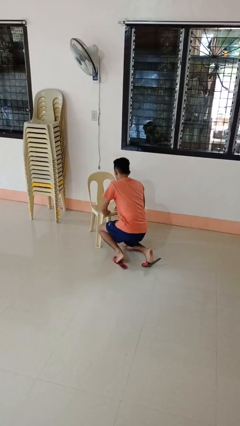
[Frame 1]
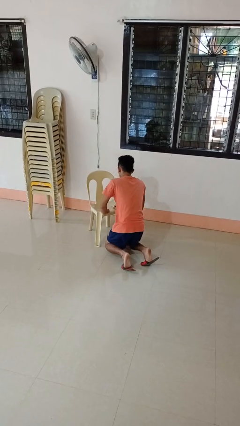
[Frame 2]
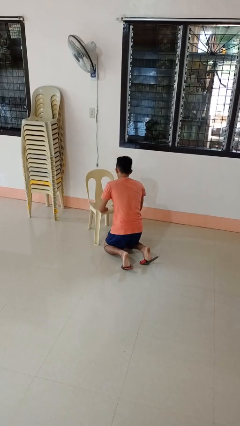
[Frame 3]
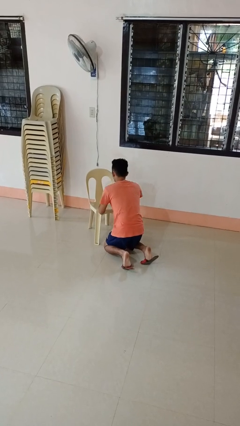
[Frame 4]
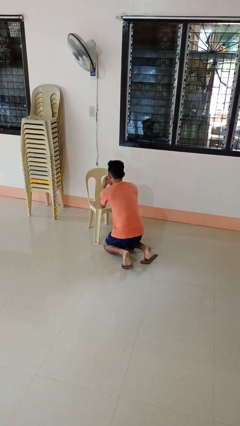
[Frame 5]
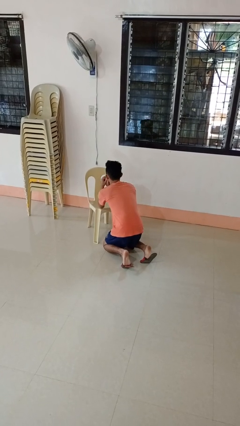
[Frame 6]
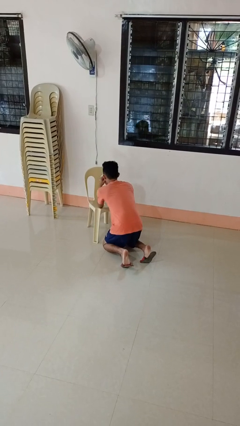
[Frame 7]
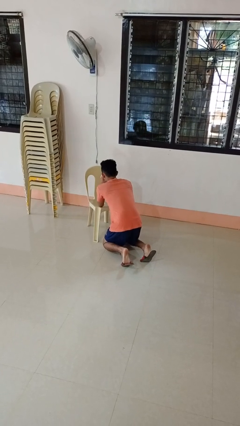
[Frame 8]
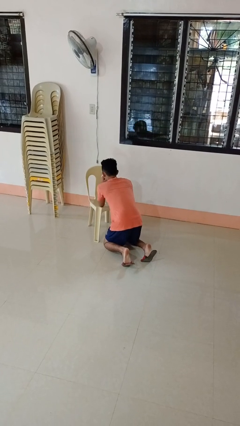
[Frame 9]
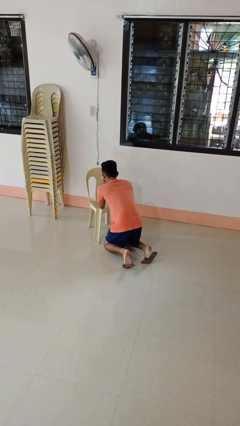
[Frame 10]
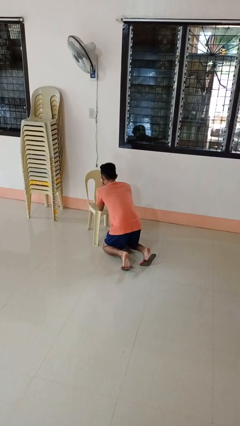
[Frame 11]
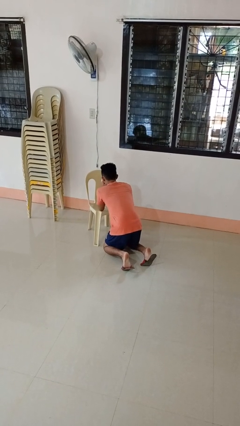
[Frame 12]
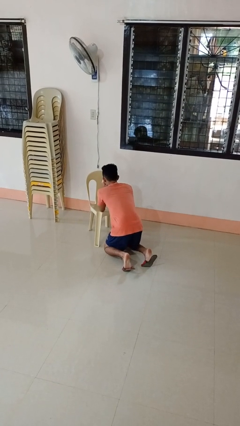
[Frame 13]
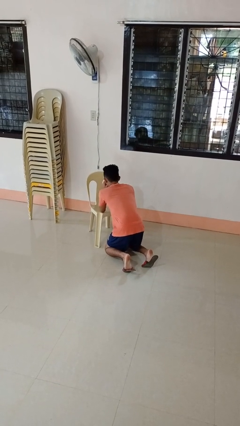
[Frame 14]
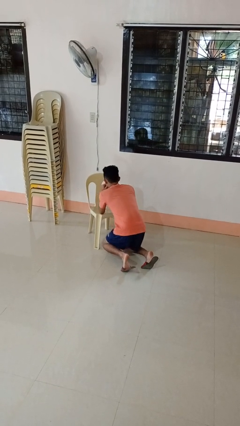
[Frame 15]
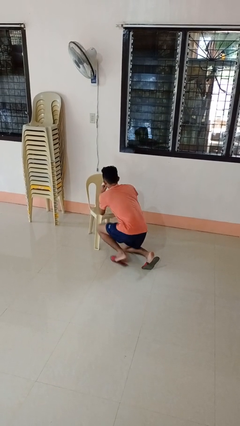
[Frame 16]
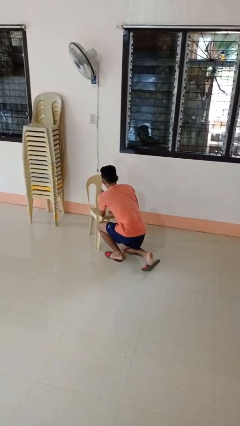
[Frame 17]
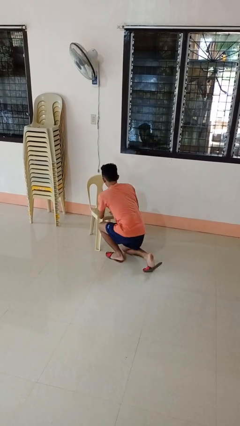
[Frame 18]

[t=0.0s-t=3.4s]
person prays

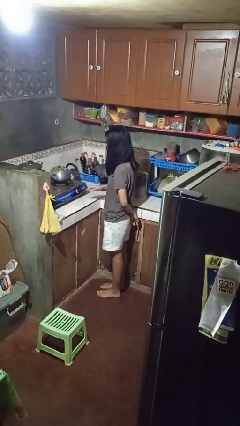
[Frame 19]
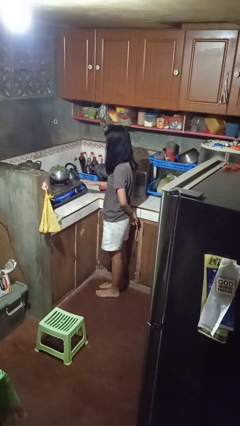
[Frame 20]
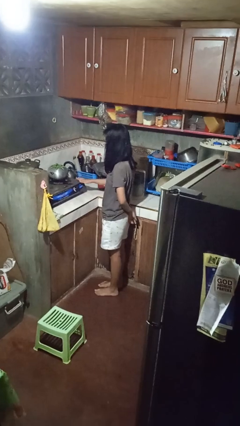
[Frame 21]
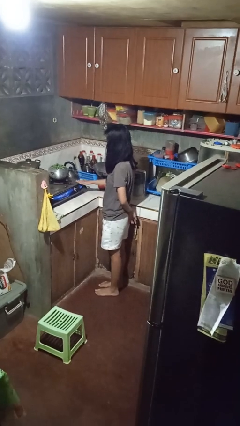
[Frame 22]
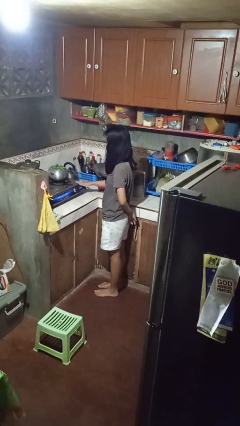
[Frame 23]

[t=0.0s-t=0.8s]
person burns hand

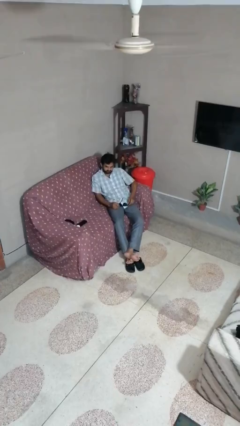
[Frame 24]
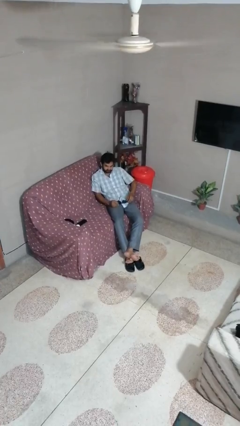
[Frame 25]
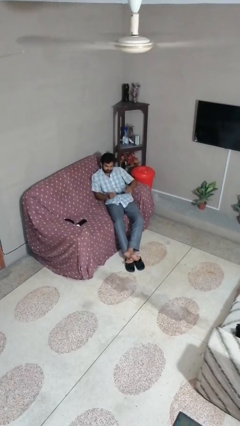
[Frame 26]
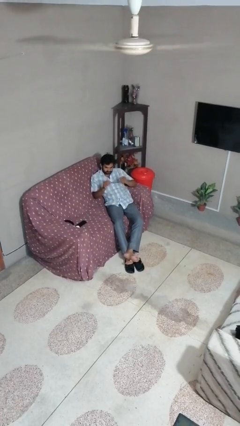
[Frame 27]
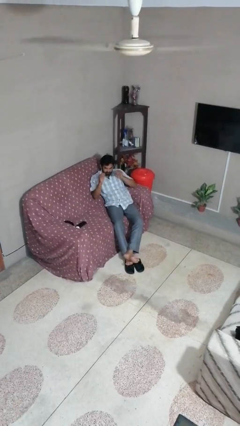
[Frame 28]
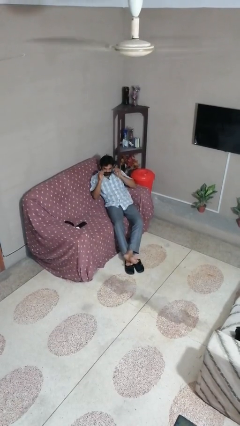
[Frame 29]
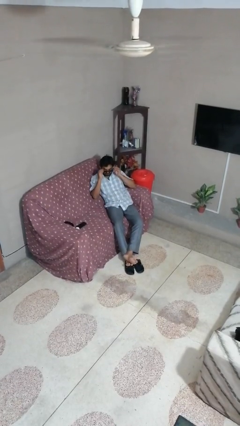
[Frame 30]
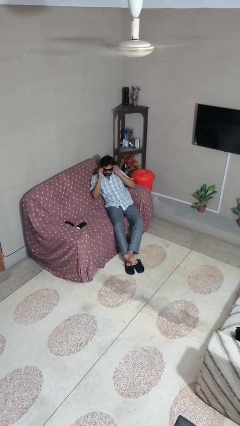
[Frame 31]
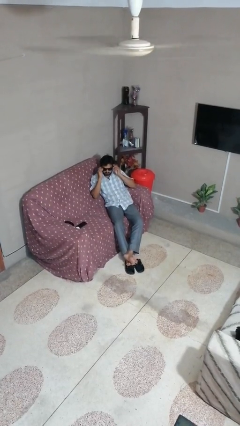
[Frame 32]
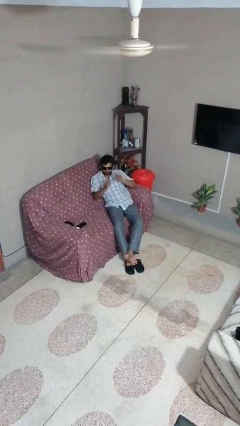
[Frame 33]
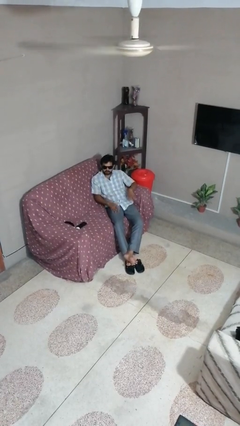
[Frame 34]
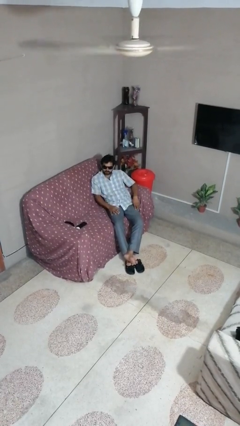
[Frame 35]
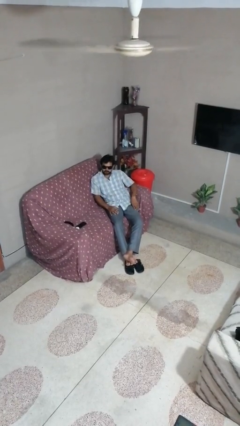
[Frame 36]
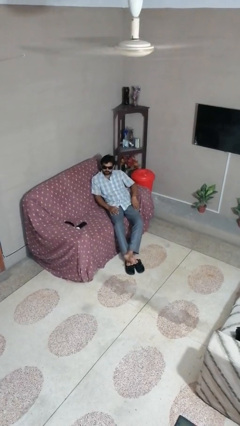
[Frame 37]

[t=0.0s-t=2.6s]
person puts on sunglasses

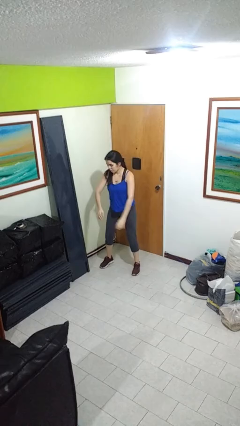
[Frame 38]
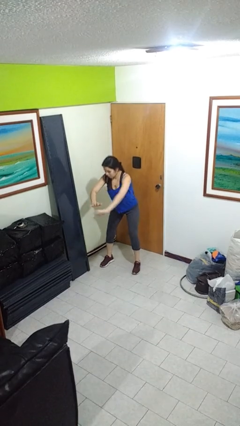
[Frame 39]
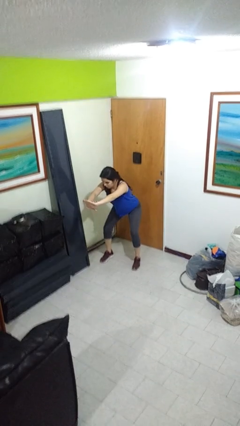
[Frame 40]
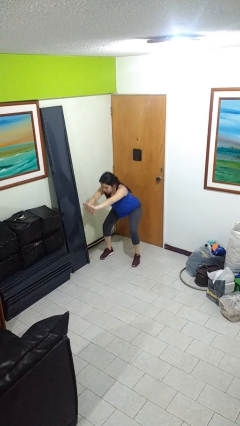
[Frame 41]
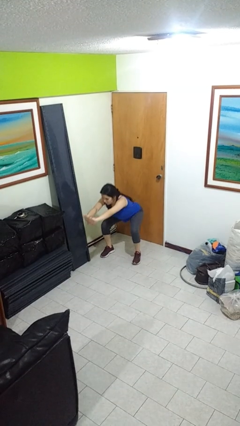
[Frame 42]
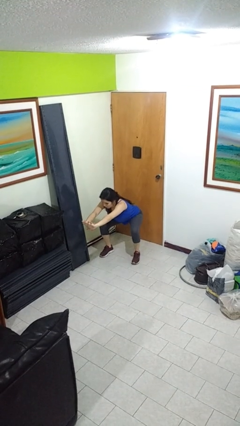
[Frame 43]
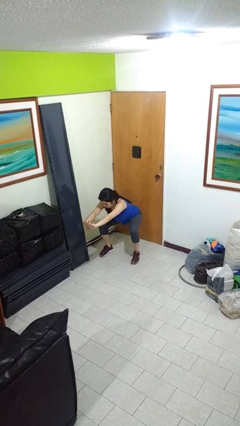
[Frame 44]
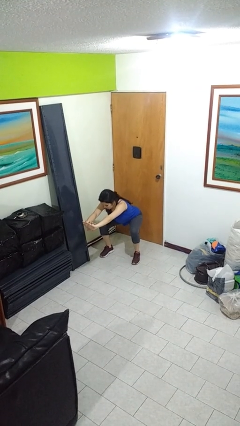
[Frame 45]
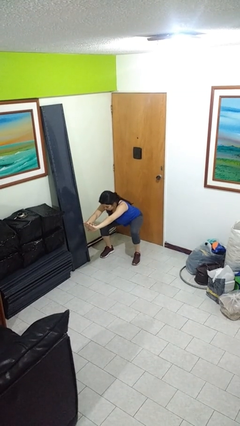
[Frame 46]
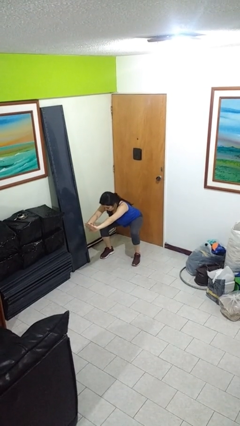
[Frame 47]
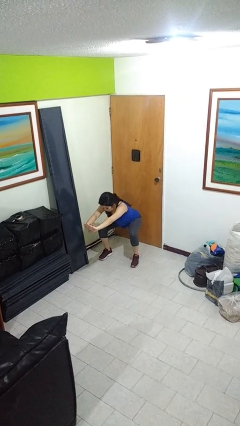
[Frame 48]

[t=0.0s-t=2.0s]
person squats

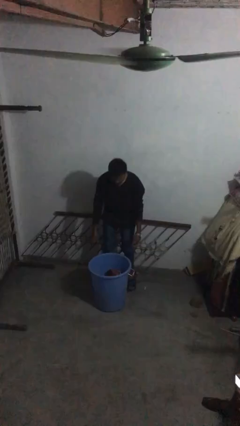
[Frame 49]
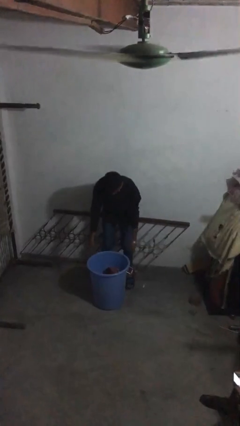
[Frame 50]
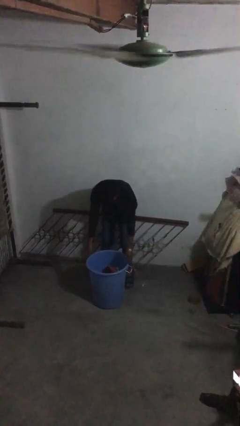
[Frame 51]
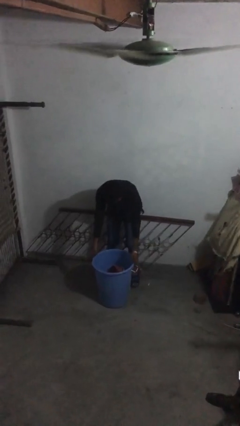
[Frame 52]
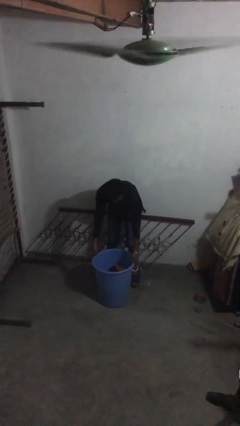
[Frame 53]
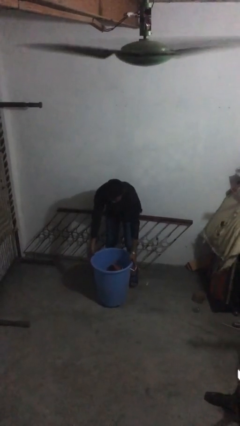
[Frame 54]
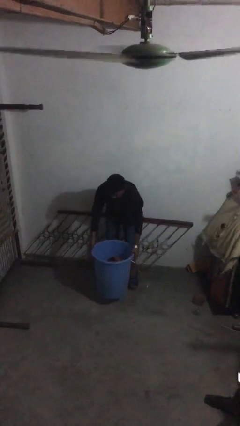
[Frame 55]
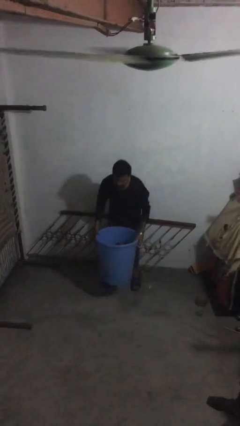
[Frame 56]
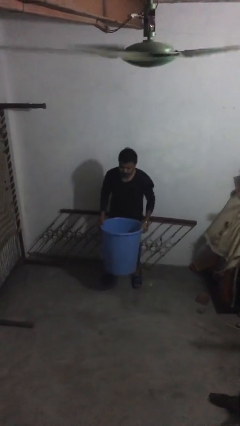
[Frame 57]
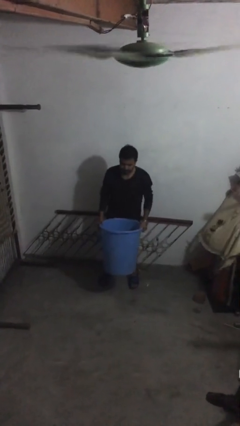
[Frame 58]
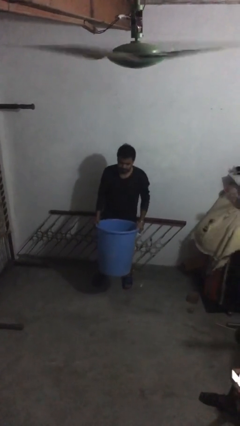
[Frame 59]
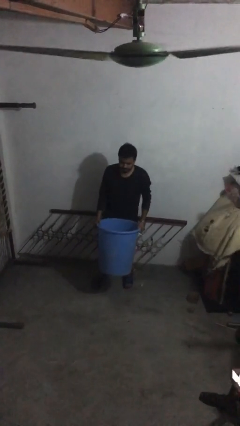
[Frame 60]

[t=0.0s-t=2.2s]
person picks up object from floor

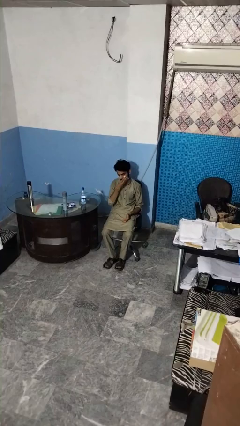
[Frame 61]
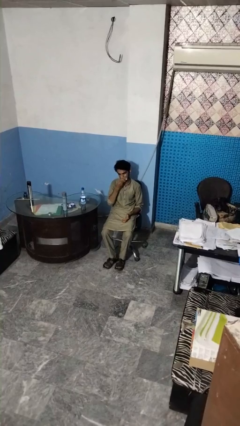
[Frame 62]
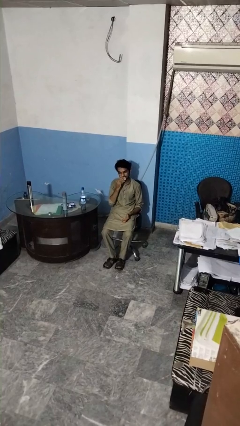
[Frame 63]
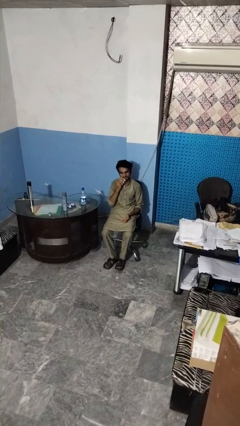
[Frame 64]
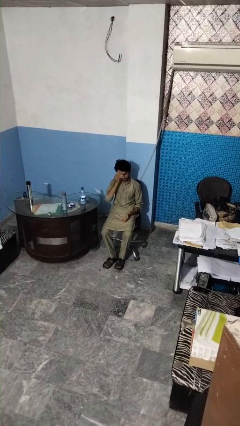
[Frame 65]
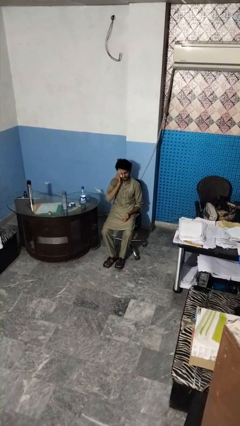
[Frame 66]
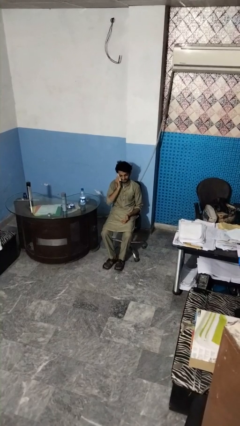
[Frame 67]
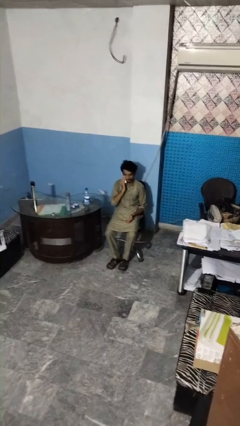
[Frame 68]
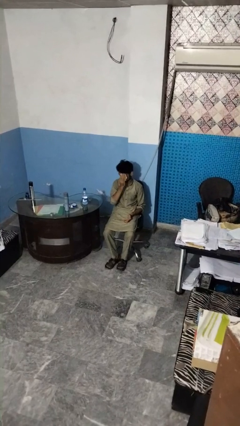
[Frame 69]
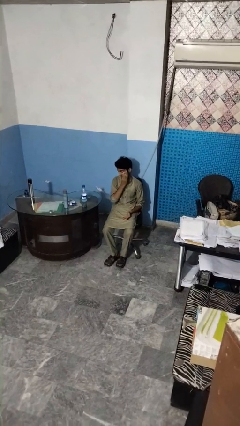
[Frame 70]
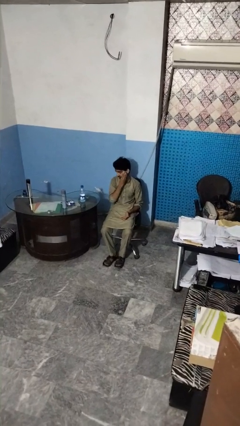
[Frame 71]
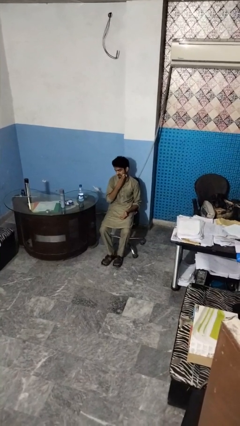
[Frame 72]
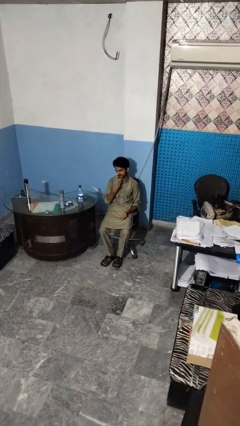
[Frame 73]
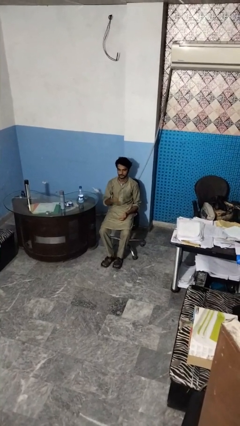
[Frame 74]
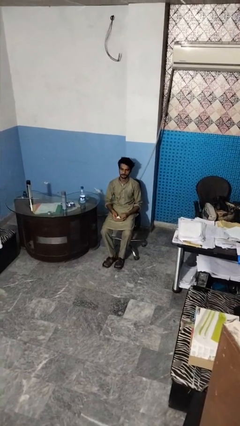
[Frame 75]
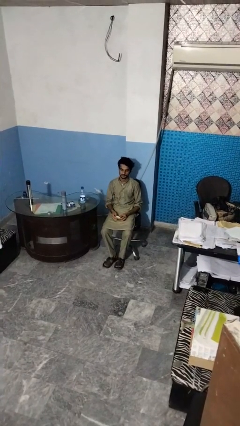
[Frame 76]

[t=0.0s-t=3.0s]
person wipes mouth with napkin

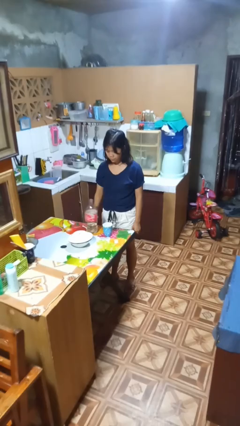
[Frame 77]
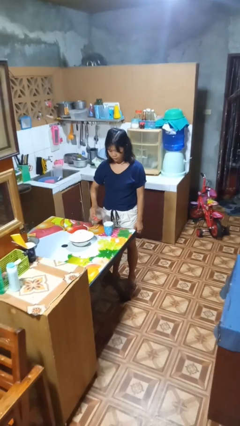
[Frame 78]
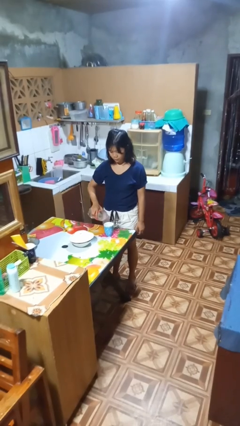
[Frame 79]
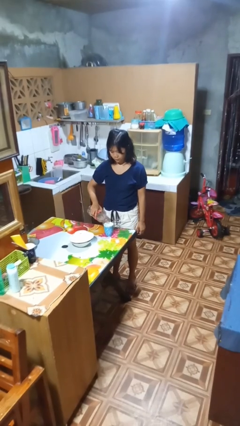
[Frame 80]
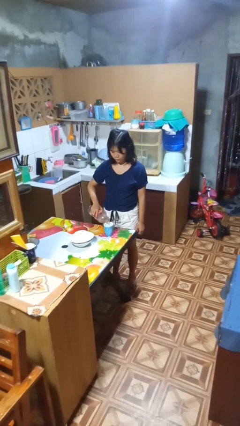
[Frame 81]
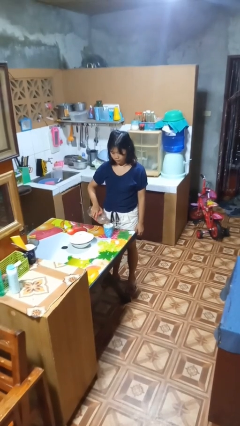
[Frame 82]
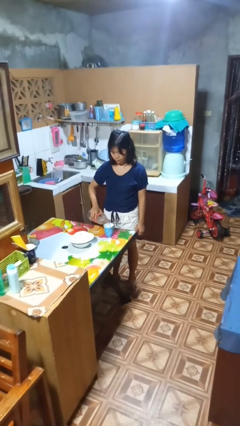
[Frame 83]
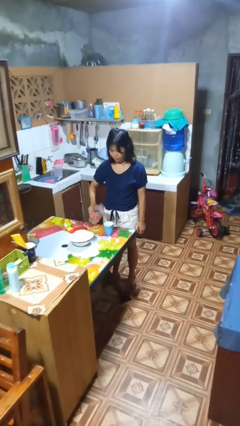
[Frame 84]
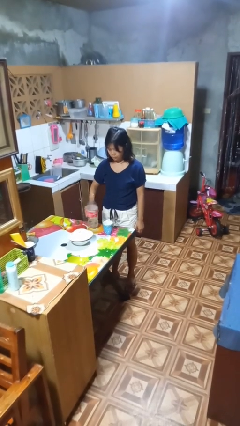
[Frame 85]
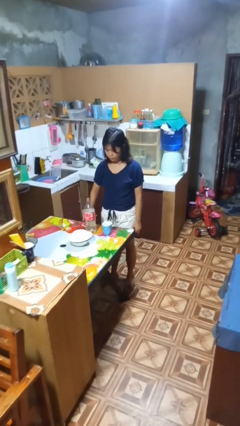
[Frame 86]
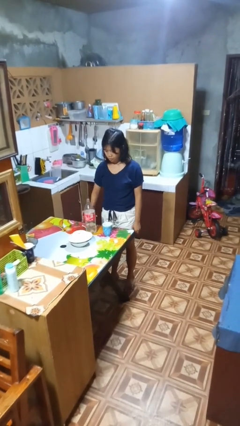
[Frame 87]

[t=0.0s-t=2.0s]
person pours liquid into cup

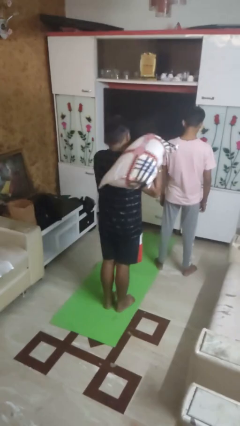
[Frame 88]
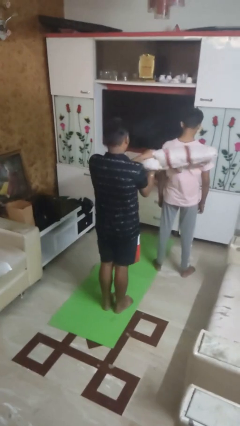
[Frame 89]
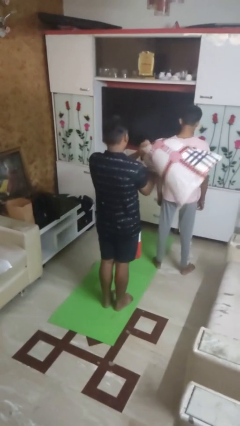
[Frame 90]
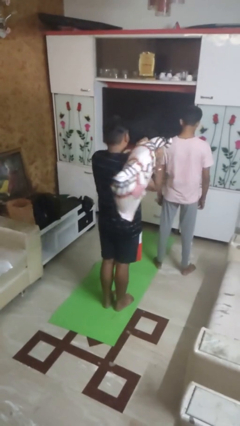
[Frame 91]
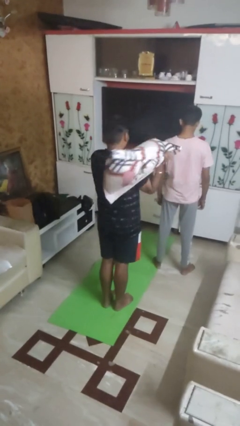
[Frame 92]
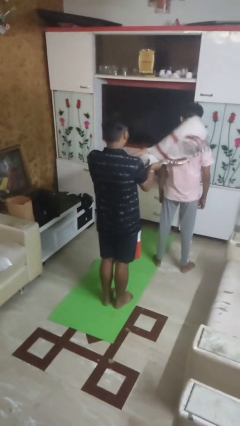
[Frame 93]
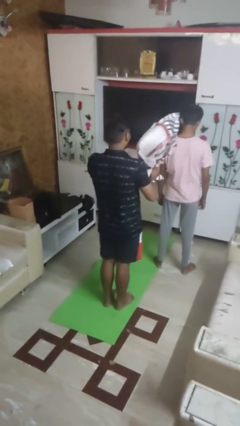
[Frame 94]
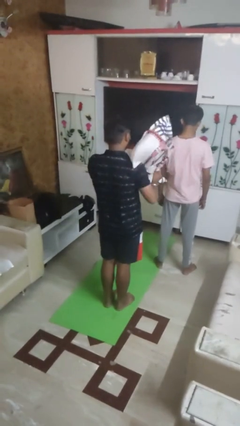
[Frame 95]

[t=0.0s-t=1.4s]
person hits person with pillow
